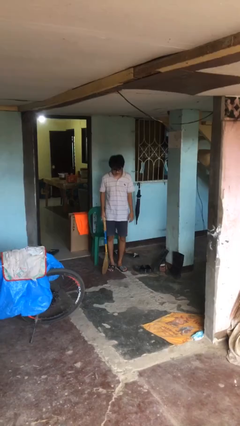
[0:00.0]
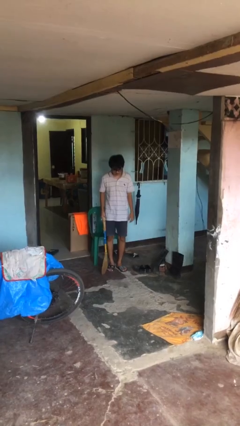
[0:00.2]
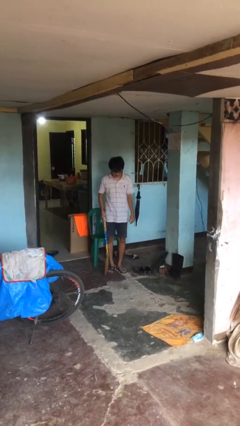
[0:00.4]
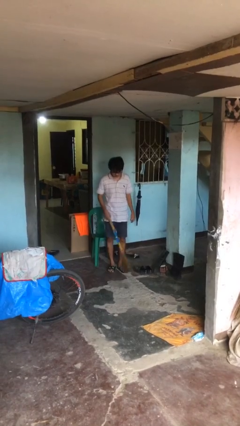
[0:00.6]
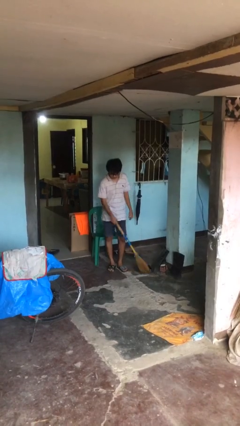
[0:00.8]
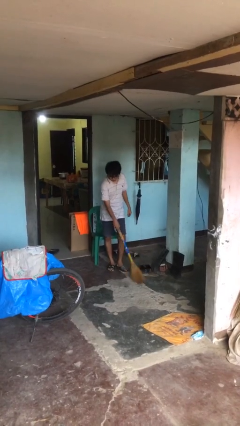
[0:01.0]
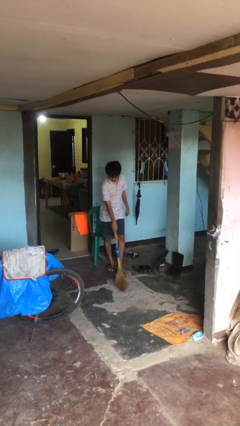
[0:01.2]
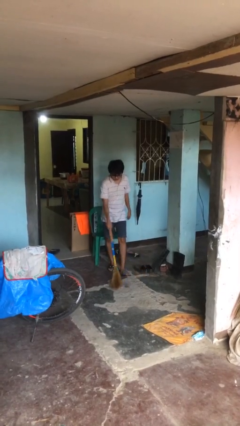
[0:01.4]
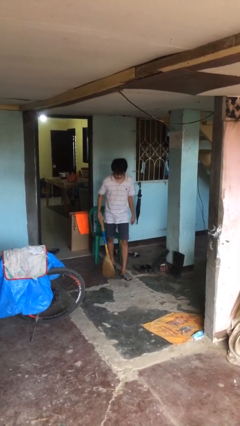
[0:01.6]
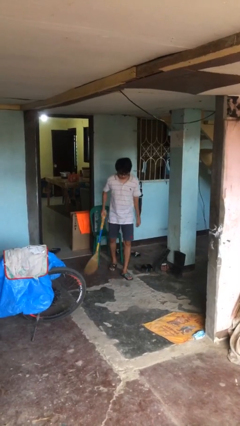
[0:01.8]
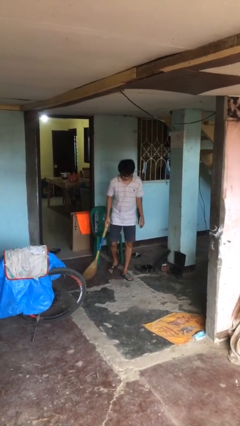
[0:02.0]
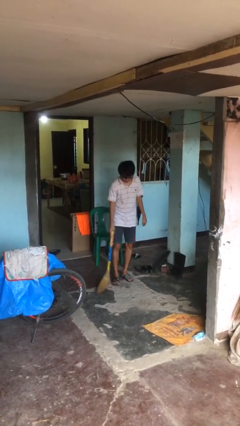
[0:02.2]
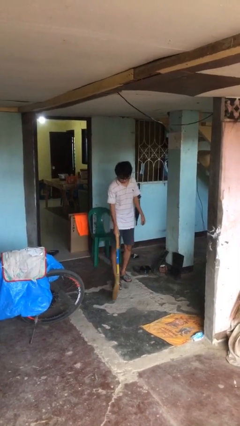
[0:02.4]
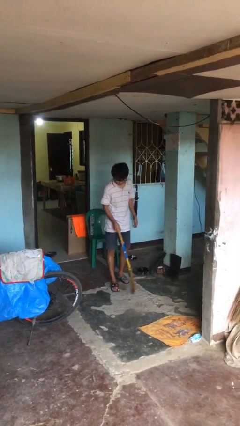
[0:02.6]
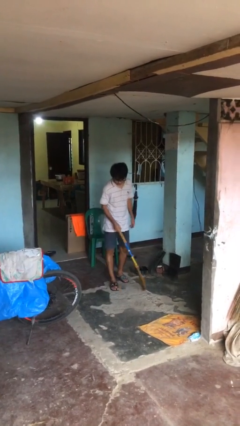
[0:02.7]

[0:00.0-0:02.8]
person sweeps floor

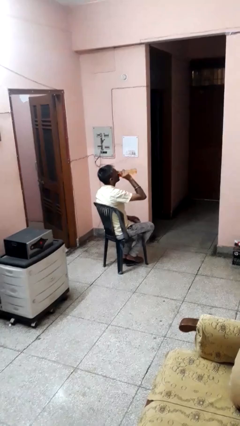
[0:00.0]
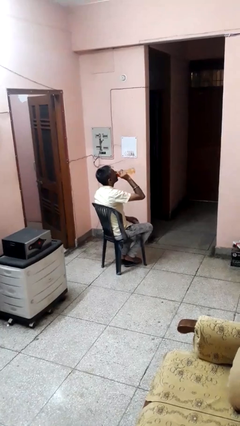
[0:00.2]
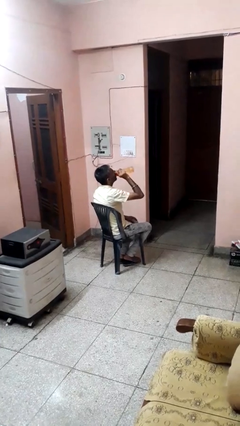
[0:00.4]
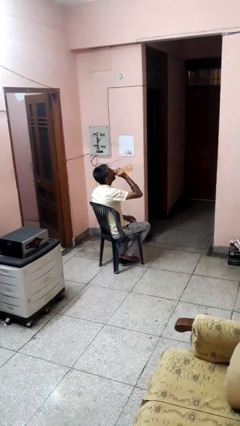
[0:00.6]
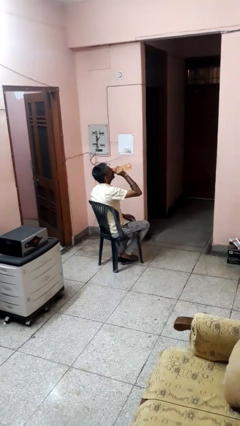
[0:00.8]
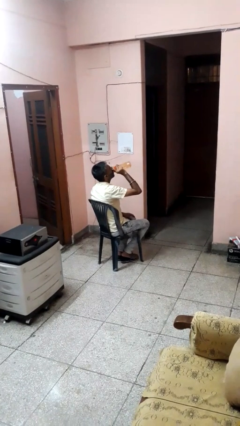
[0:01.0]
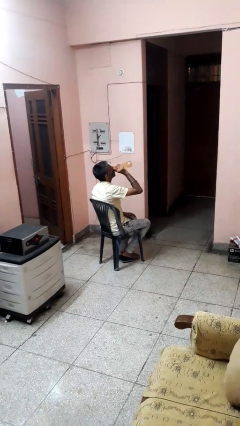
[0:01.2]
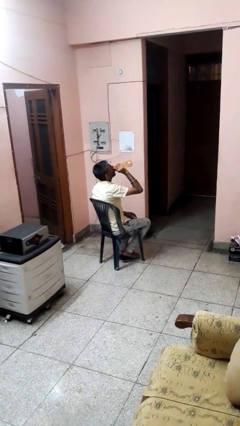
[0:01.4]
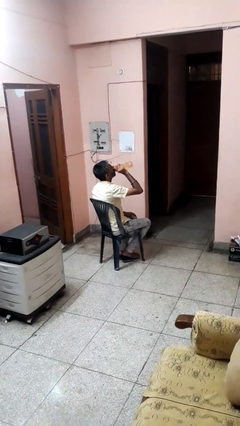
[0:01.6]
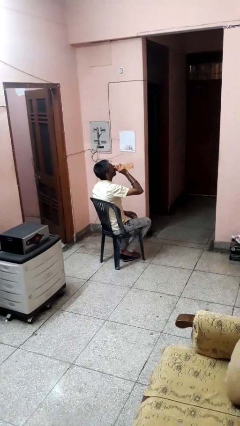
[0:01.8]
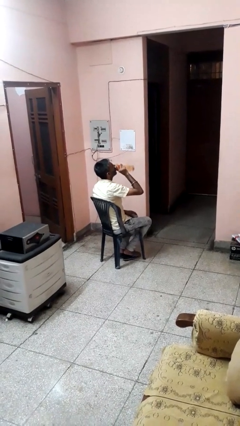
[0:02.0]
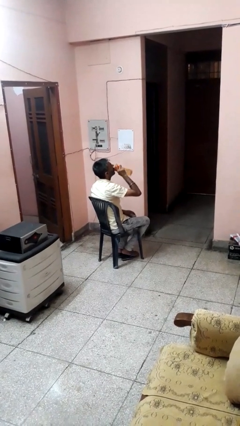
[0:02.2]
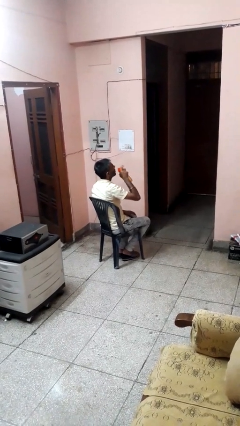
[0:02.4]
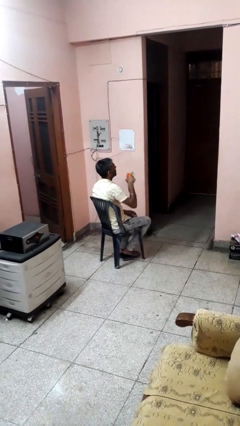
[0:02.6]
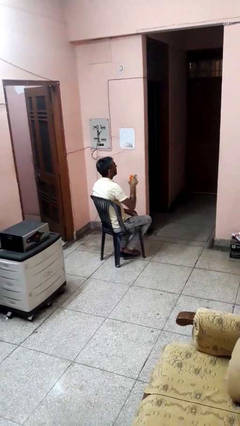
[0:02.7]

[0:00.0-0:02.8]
person drinks from bottle

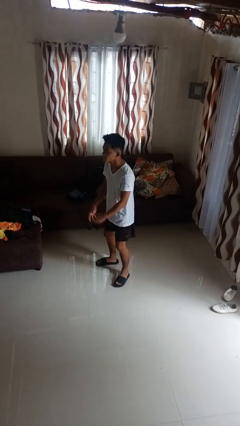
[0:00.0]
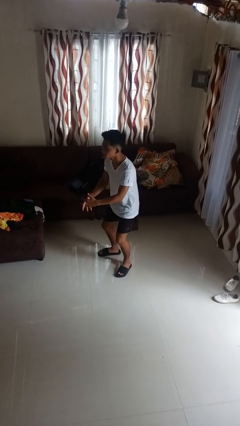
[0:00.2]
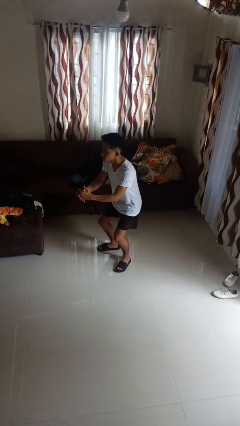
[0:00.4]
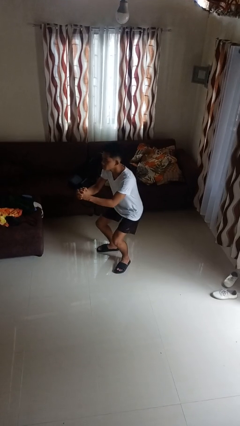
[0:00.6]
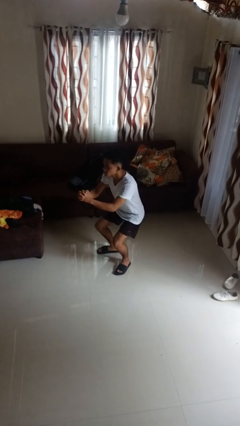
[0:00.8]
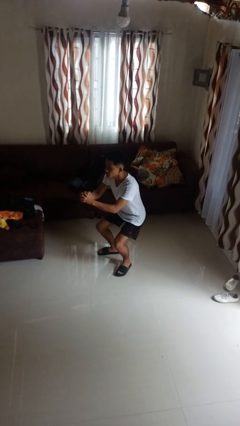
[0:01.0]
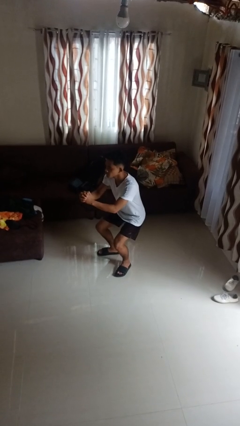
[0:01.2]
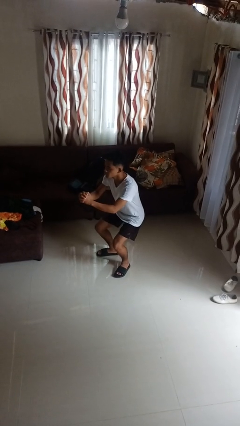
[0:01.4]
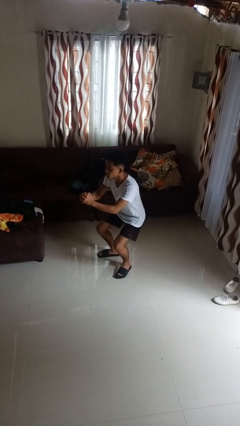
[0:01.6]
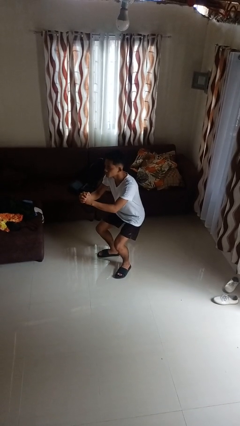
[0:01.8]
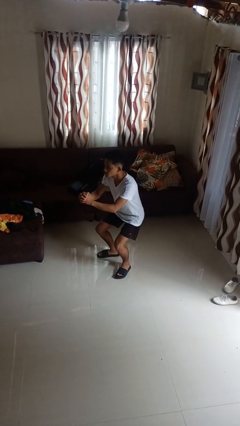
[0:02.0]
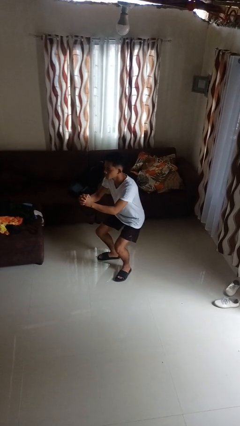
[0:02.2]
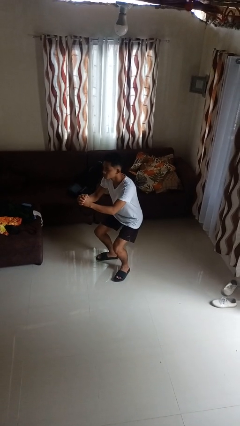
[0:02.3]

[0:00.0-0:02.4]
person squats

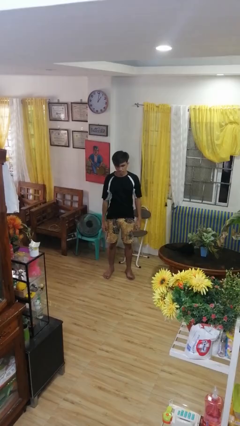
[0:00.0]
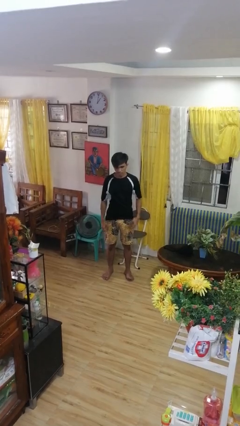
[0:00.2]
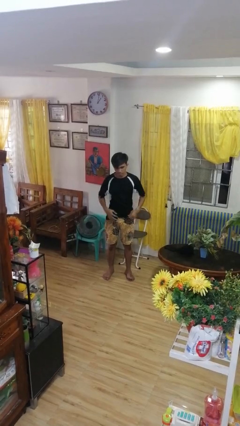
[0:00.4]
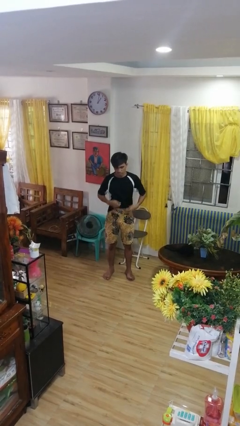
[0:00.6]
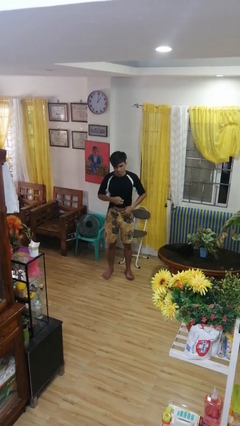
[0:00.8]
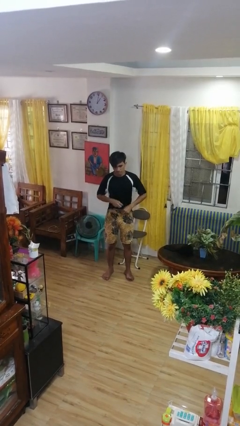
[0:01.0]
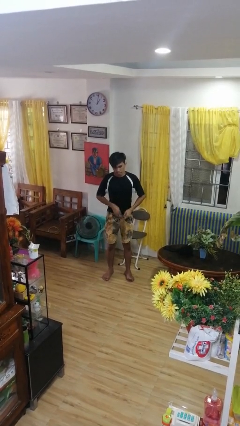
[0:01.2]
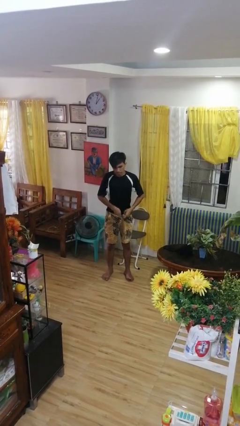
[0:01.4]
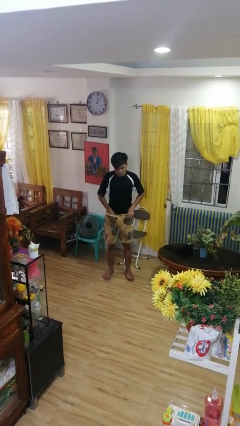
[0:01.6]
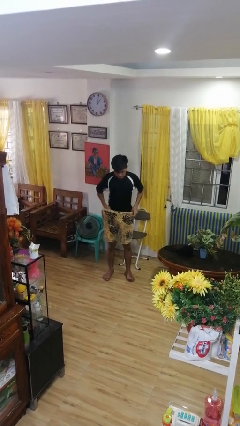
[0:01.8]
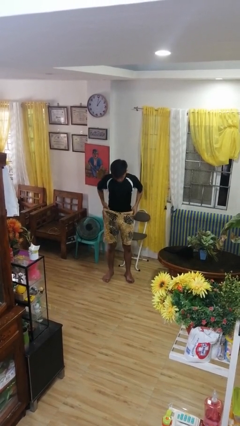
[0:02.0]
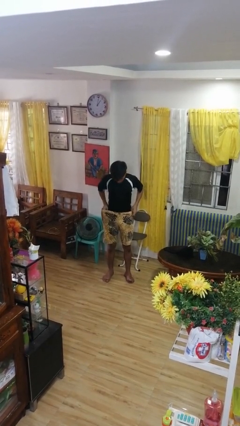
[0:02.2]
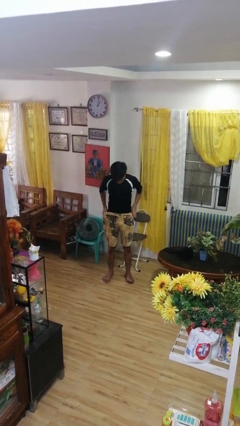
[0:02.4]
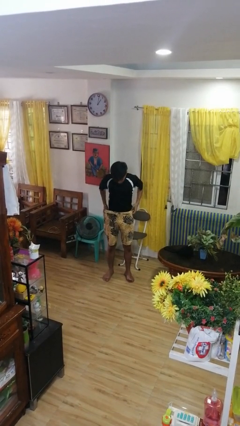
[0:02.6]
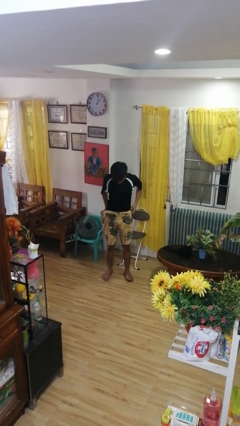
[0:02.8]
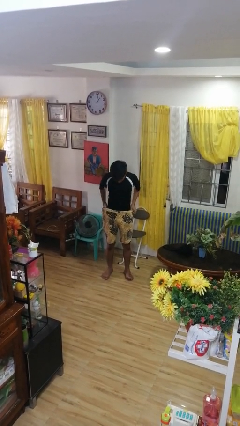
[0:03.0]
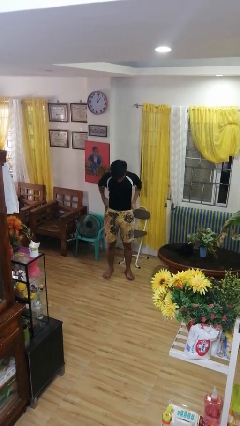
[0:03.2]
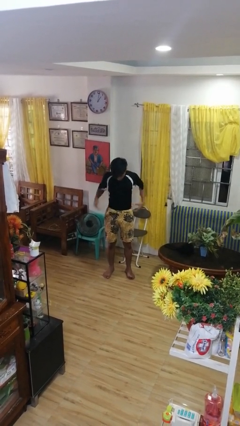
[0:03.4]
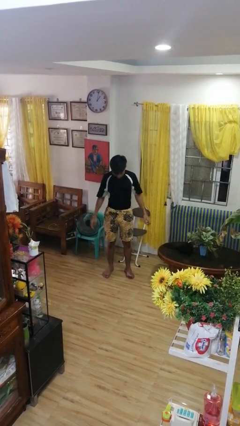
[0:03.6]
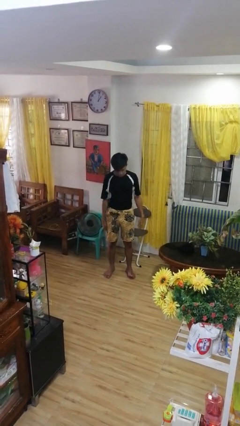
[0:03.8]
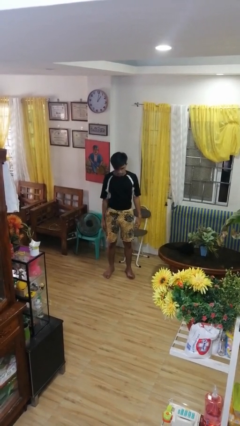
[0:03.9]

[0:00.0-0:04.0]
person tucks in shirt

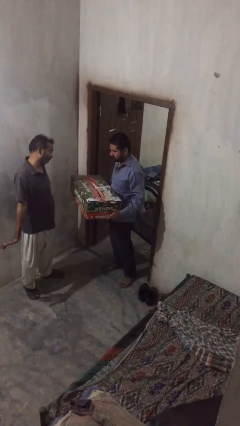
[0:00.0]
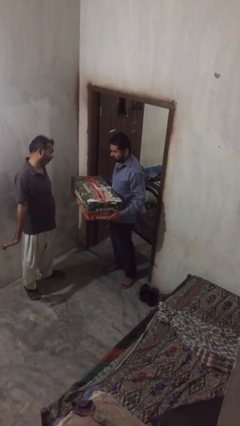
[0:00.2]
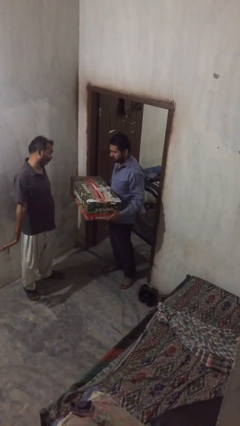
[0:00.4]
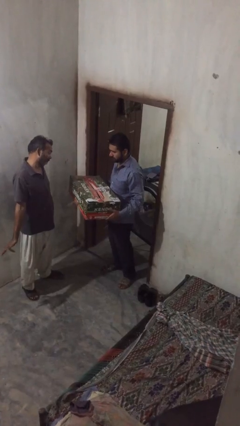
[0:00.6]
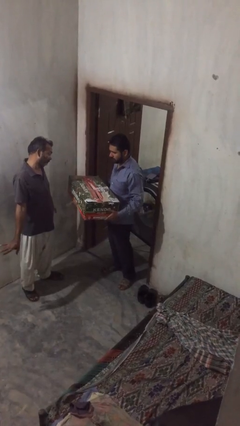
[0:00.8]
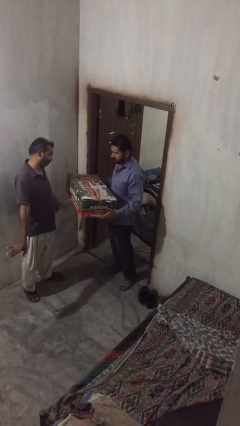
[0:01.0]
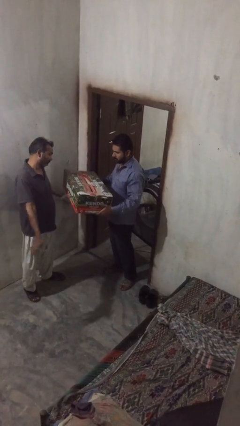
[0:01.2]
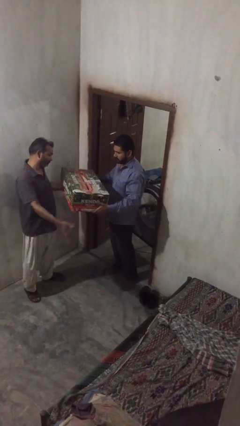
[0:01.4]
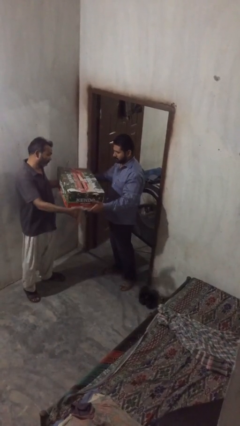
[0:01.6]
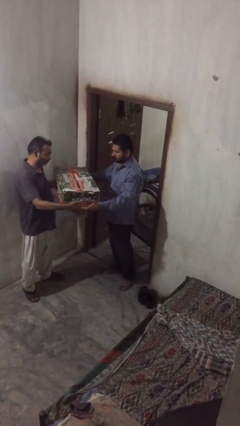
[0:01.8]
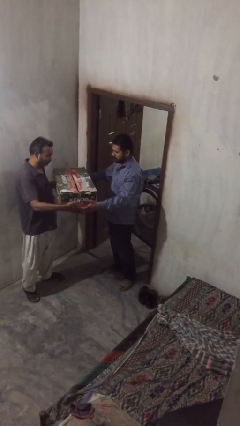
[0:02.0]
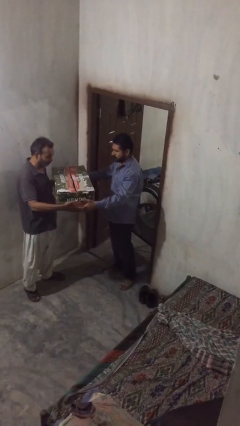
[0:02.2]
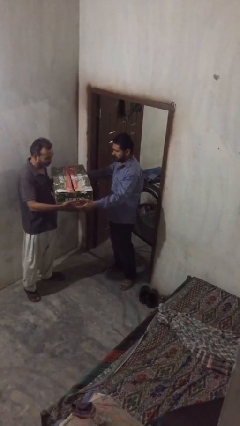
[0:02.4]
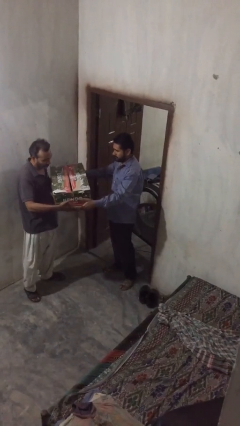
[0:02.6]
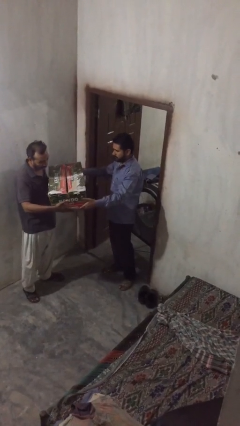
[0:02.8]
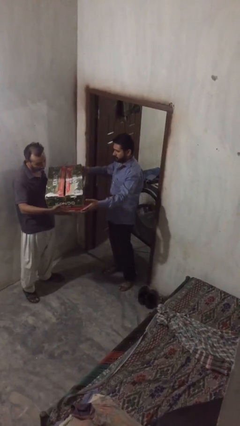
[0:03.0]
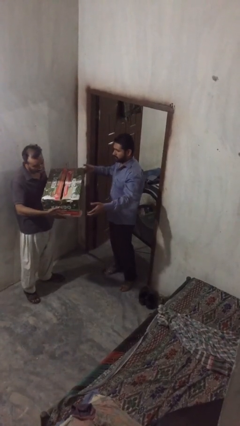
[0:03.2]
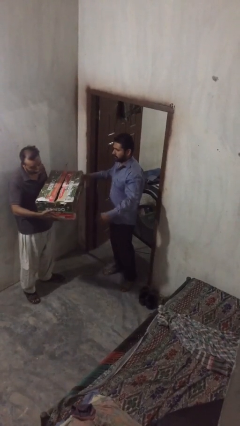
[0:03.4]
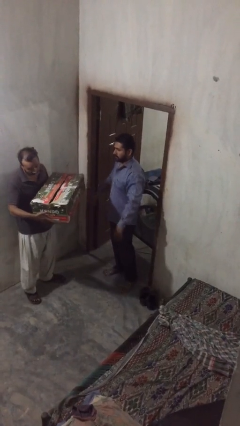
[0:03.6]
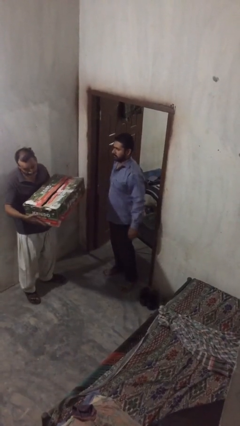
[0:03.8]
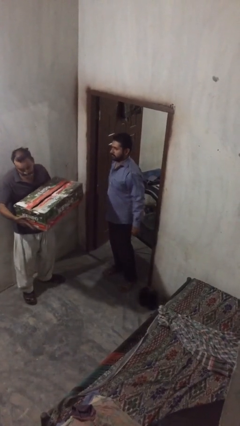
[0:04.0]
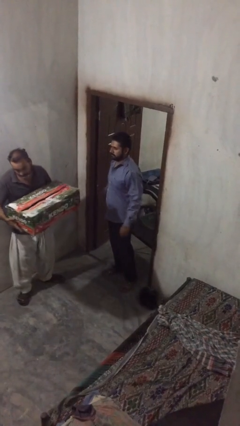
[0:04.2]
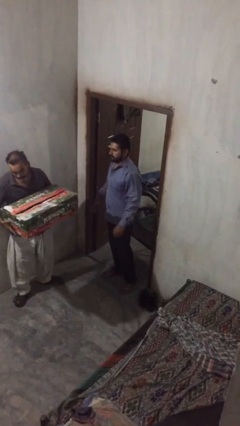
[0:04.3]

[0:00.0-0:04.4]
person transfers object to person

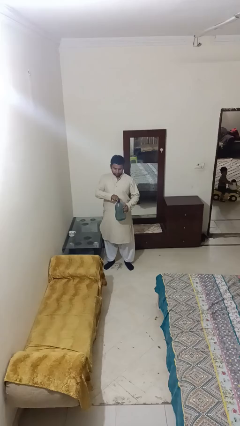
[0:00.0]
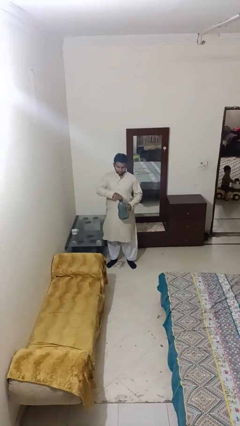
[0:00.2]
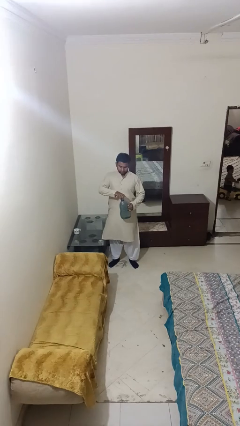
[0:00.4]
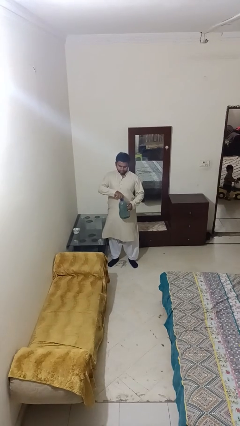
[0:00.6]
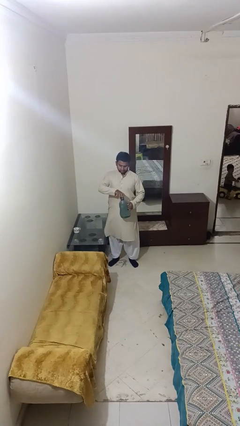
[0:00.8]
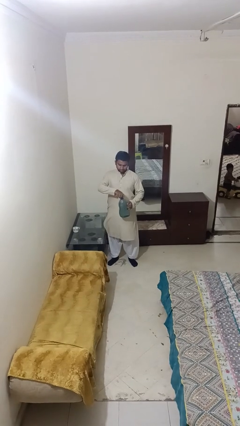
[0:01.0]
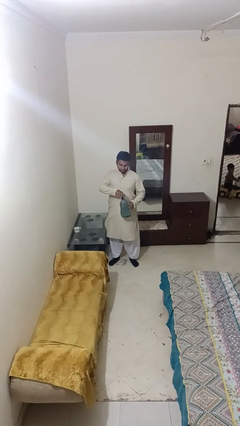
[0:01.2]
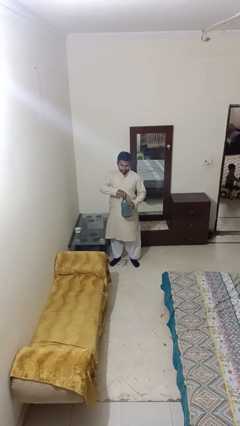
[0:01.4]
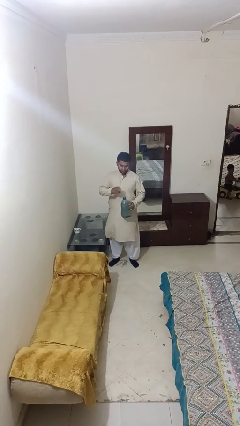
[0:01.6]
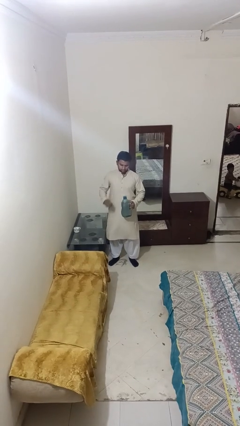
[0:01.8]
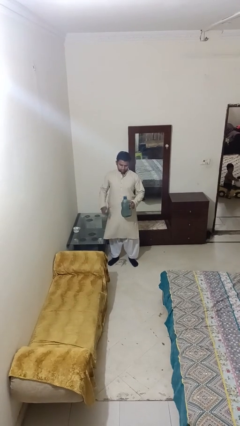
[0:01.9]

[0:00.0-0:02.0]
person unscrews lid from bottle
